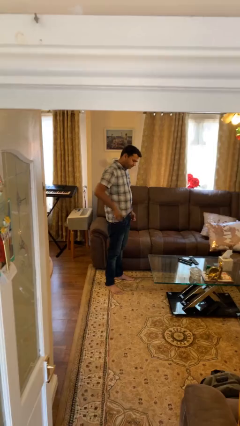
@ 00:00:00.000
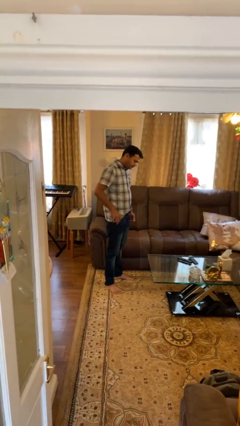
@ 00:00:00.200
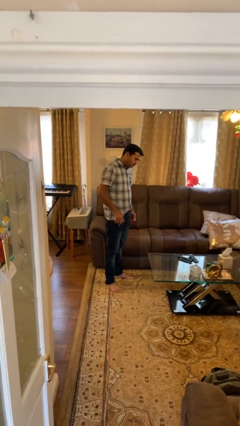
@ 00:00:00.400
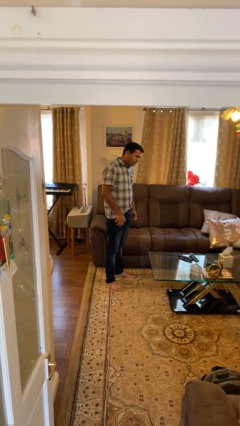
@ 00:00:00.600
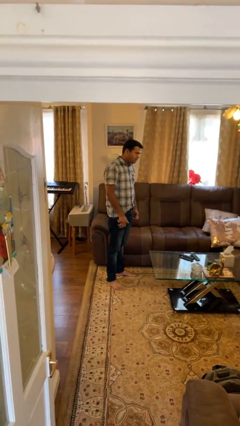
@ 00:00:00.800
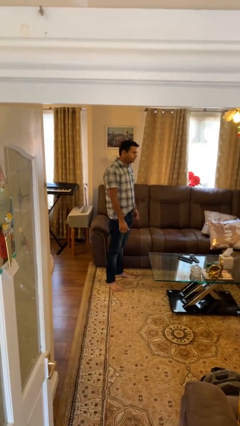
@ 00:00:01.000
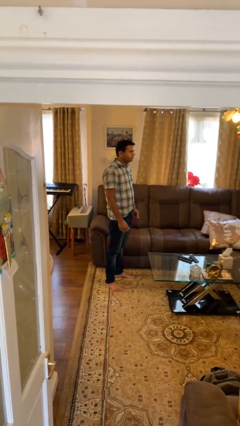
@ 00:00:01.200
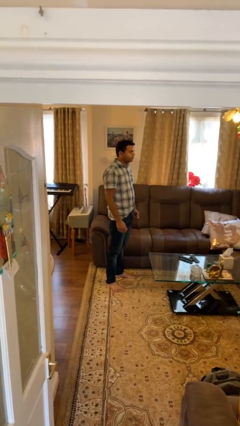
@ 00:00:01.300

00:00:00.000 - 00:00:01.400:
person puts phone into pocket

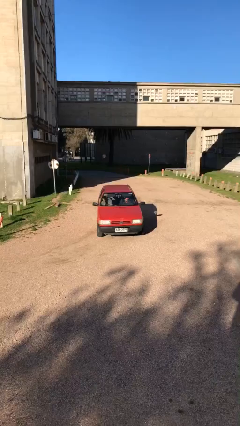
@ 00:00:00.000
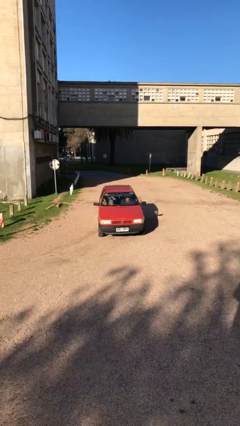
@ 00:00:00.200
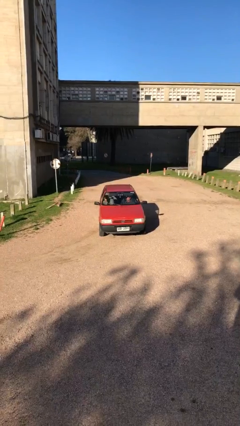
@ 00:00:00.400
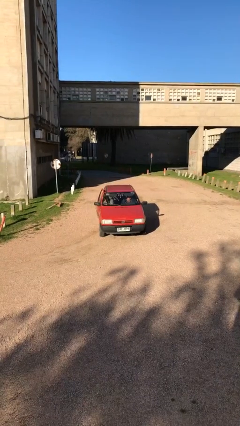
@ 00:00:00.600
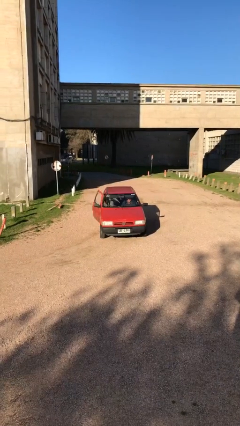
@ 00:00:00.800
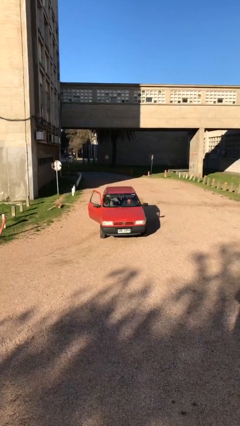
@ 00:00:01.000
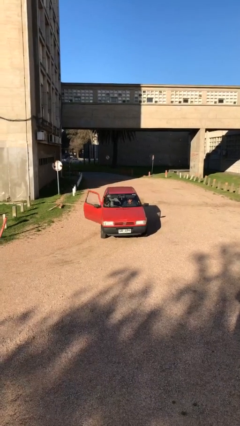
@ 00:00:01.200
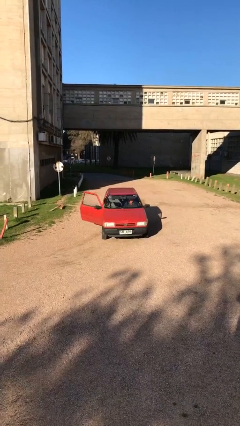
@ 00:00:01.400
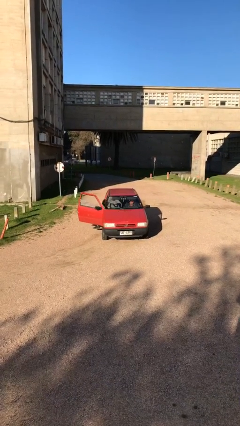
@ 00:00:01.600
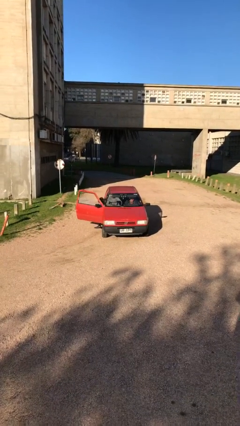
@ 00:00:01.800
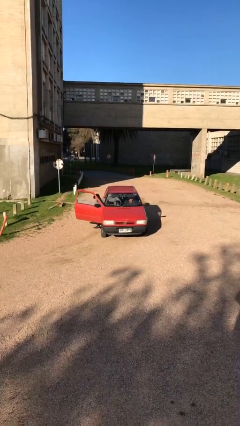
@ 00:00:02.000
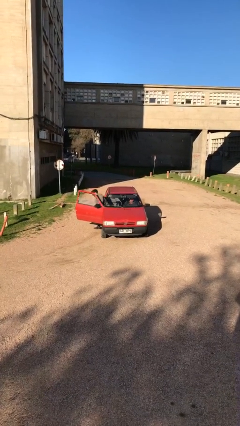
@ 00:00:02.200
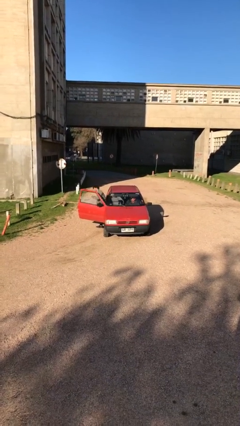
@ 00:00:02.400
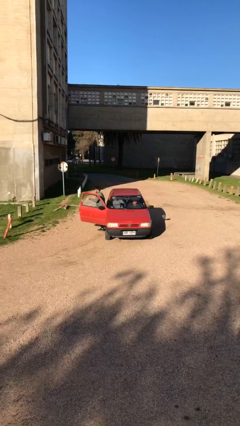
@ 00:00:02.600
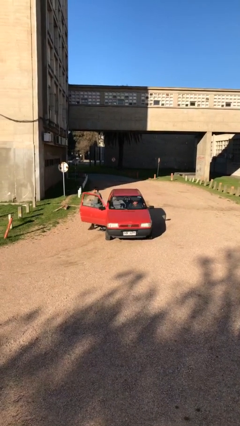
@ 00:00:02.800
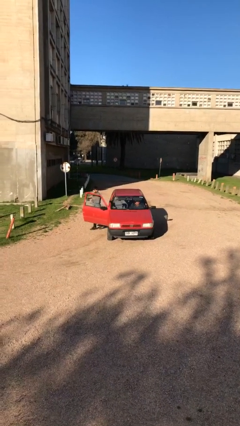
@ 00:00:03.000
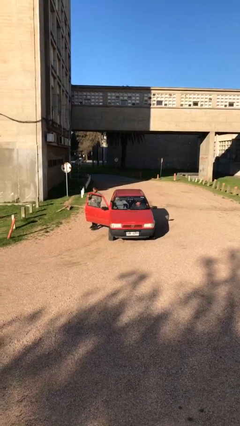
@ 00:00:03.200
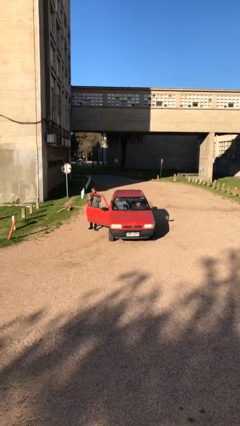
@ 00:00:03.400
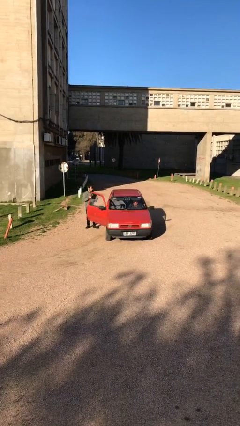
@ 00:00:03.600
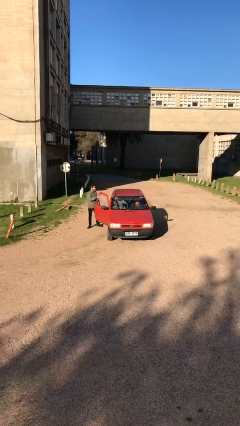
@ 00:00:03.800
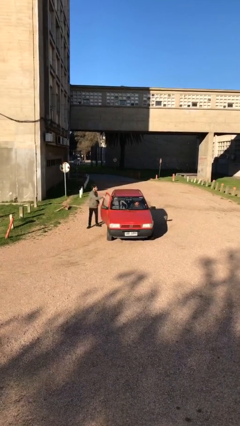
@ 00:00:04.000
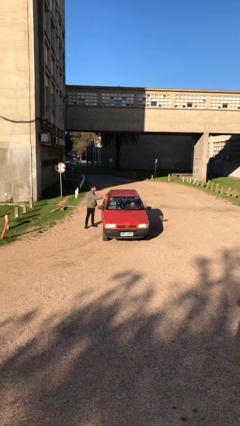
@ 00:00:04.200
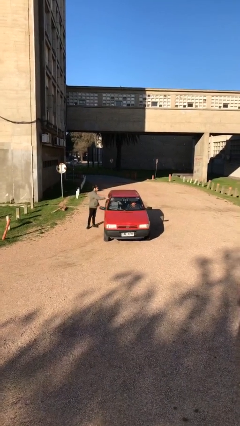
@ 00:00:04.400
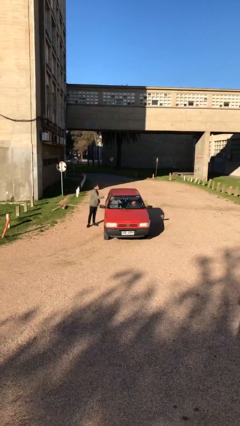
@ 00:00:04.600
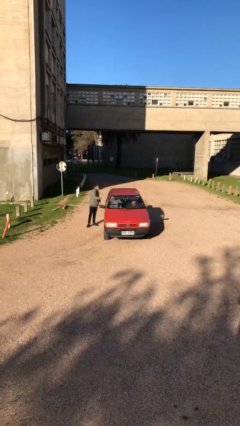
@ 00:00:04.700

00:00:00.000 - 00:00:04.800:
car drops off person

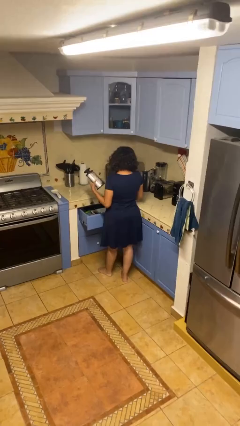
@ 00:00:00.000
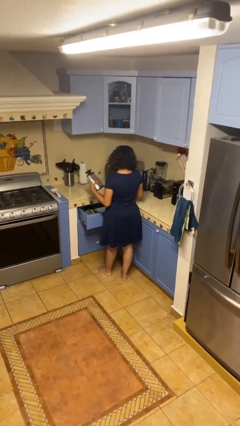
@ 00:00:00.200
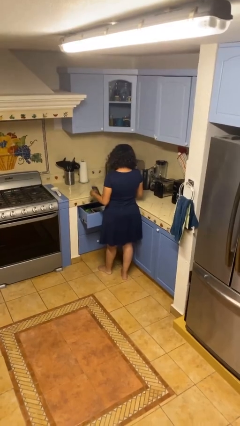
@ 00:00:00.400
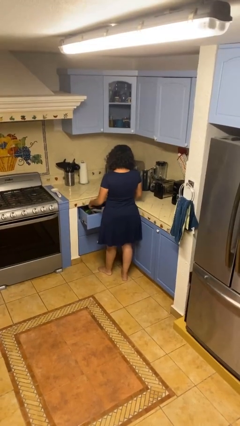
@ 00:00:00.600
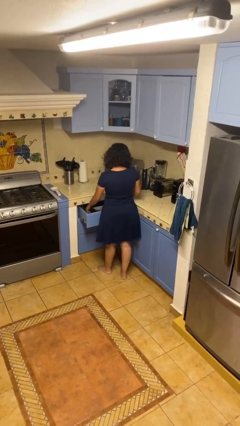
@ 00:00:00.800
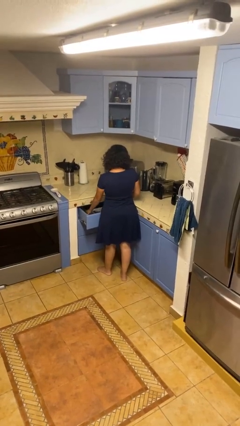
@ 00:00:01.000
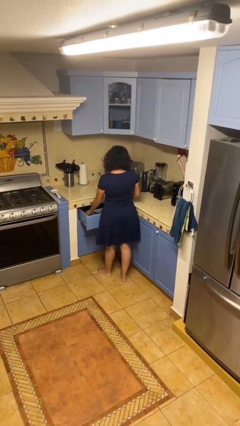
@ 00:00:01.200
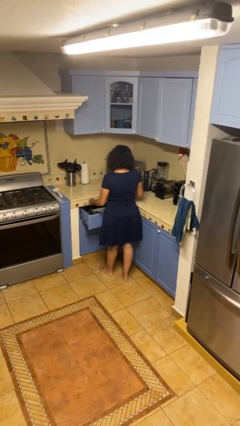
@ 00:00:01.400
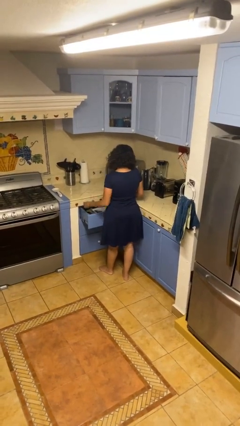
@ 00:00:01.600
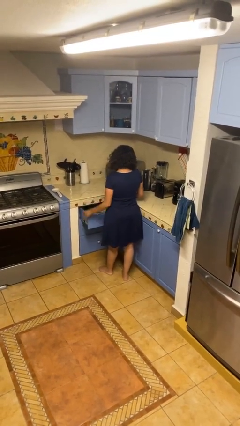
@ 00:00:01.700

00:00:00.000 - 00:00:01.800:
person puts object into kitchen drawer

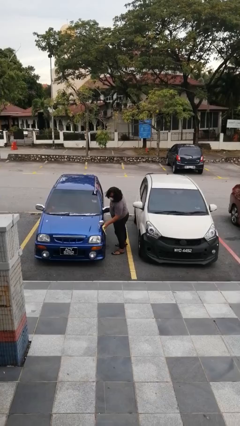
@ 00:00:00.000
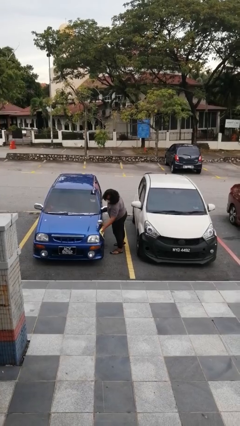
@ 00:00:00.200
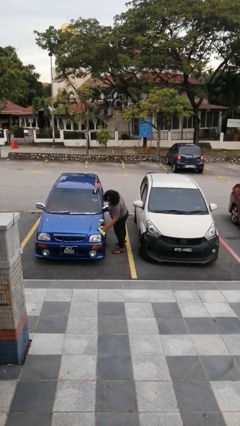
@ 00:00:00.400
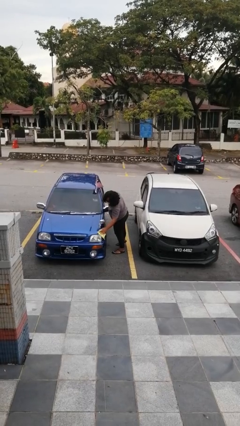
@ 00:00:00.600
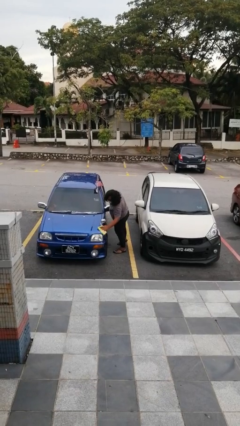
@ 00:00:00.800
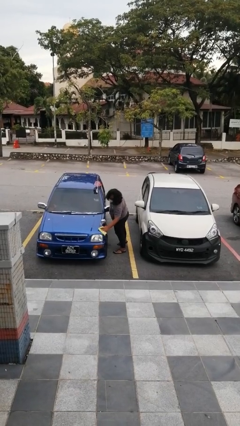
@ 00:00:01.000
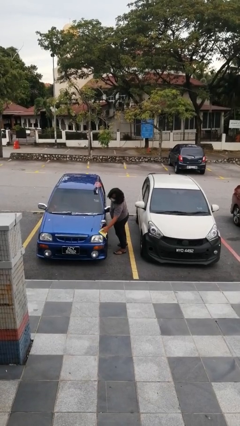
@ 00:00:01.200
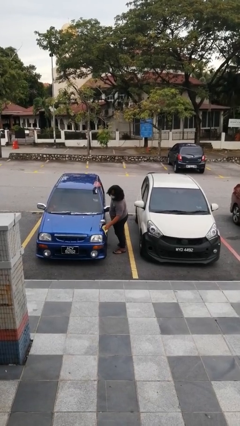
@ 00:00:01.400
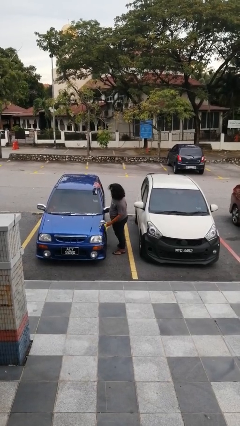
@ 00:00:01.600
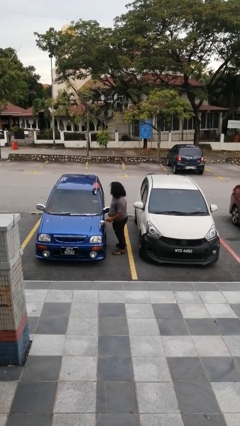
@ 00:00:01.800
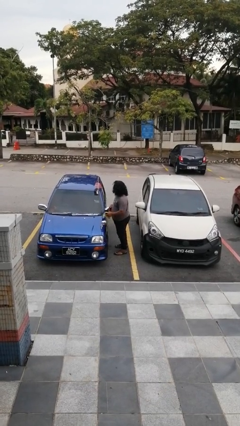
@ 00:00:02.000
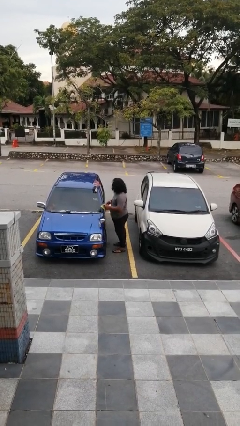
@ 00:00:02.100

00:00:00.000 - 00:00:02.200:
person polishes car with rag

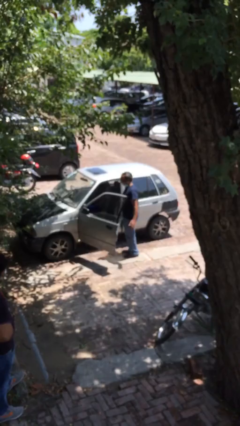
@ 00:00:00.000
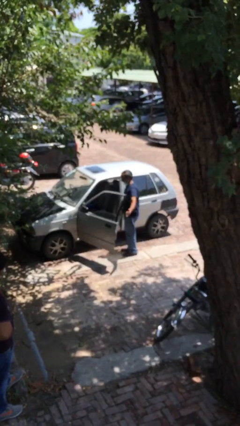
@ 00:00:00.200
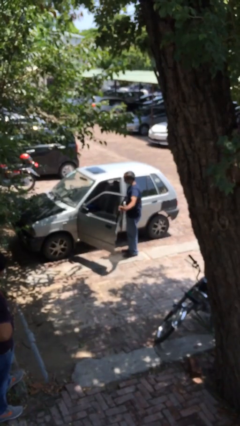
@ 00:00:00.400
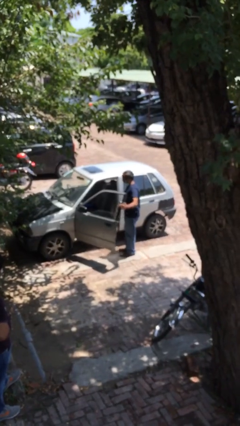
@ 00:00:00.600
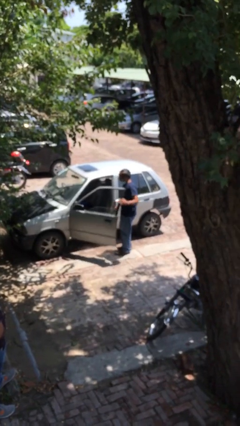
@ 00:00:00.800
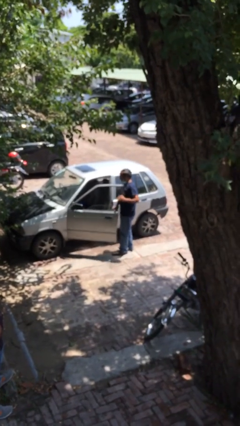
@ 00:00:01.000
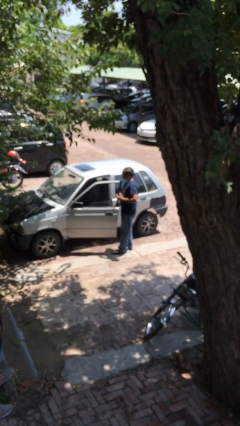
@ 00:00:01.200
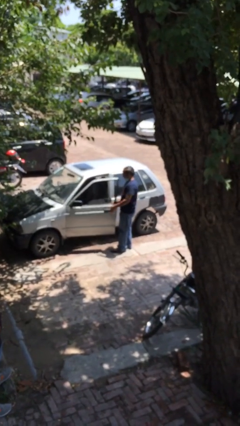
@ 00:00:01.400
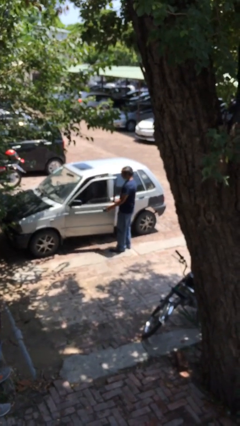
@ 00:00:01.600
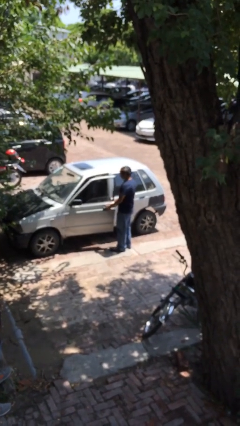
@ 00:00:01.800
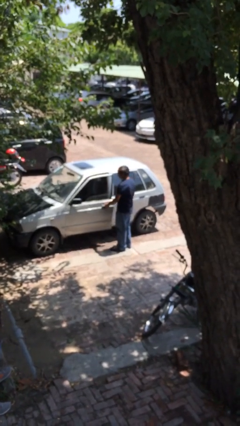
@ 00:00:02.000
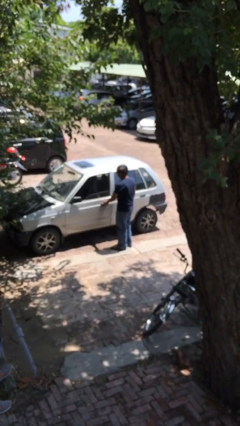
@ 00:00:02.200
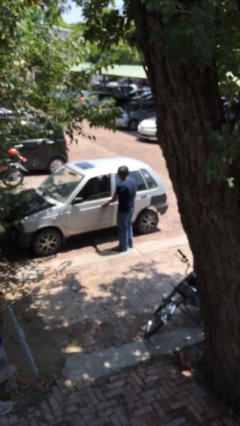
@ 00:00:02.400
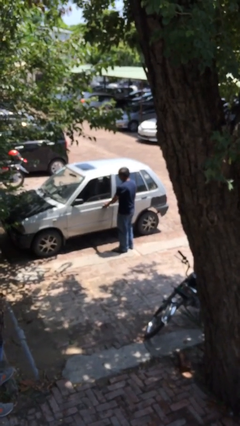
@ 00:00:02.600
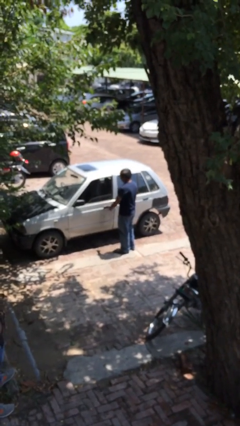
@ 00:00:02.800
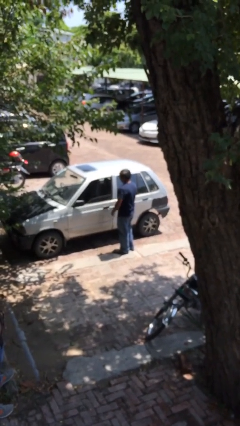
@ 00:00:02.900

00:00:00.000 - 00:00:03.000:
person closes car door

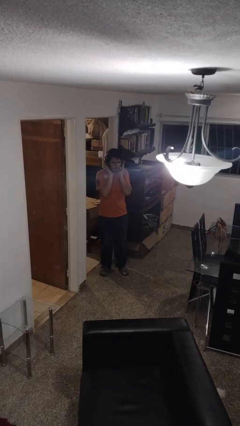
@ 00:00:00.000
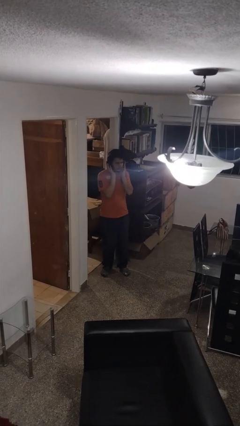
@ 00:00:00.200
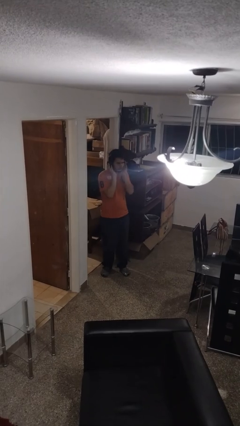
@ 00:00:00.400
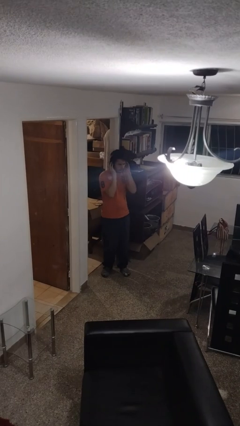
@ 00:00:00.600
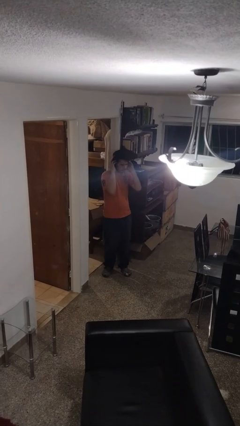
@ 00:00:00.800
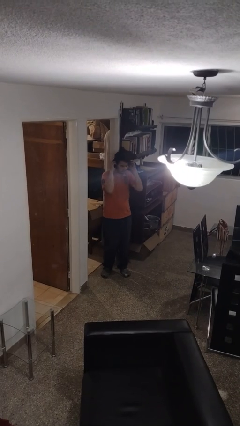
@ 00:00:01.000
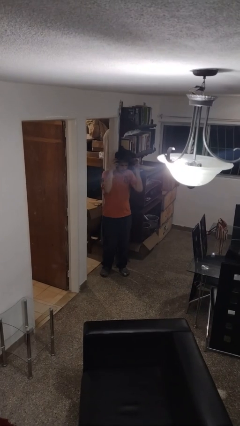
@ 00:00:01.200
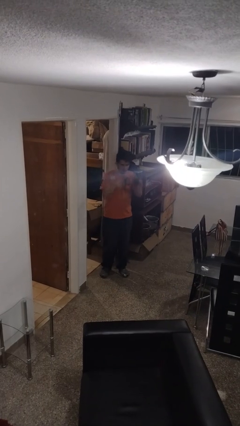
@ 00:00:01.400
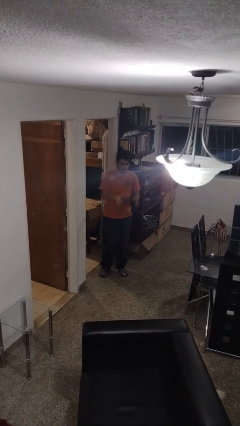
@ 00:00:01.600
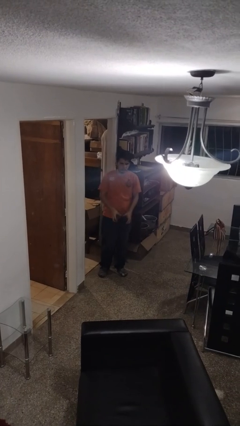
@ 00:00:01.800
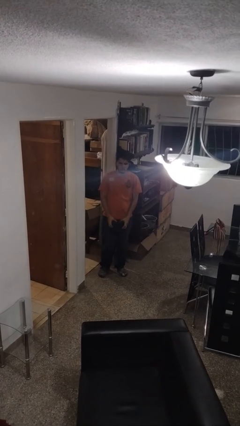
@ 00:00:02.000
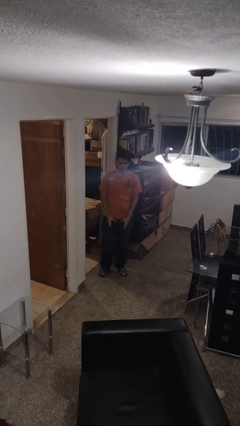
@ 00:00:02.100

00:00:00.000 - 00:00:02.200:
person takes off headphones

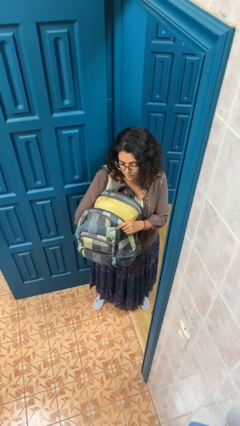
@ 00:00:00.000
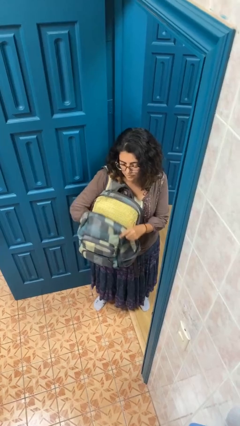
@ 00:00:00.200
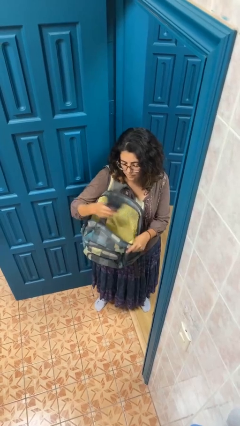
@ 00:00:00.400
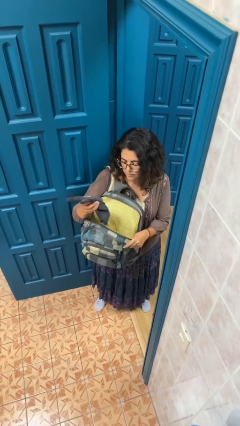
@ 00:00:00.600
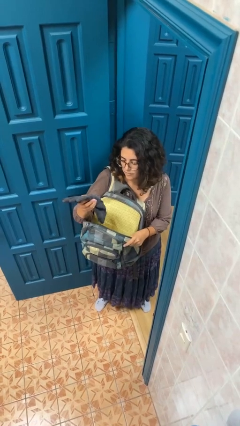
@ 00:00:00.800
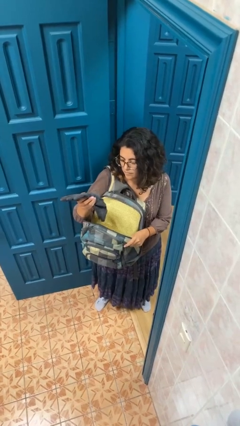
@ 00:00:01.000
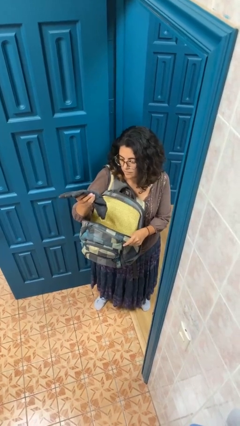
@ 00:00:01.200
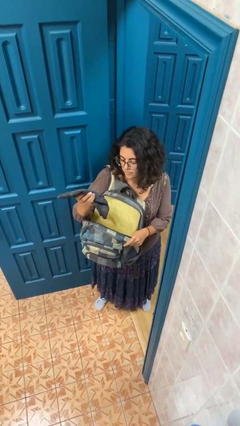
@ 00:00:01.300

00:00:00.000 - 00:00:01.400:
person takes object from backpack

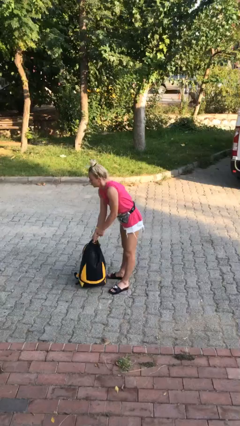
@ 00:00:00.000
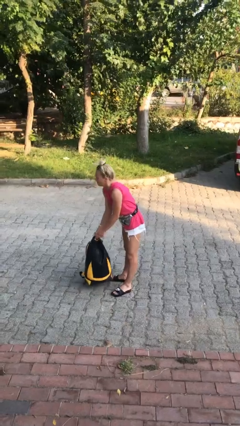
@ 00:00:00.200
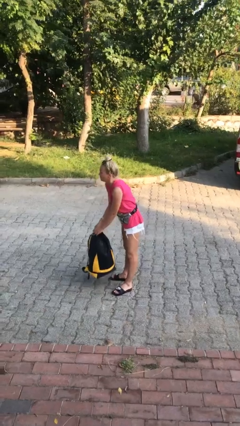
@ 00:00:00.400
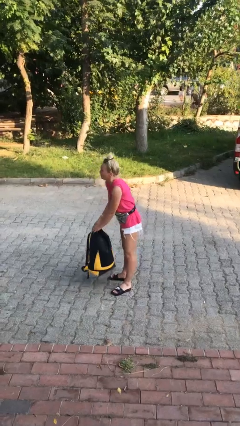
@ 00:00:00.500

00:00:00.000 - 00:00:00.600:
person picks up object from floor
